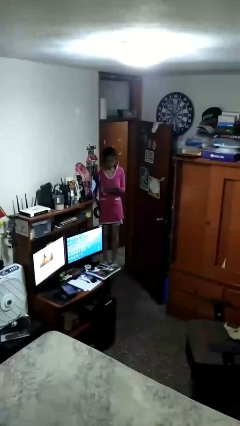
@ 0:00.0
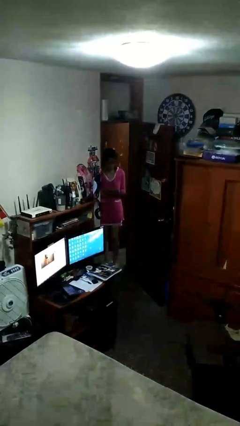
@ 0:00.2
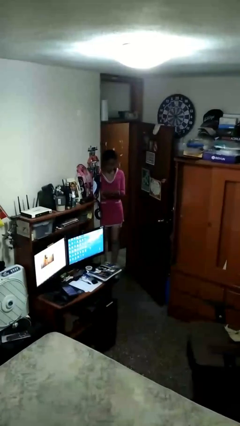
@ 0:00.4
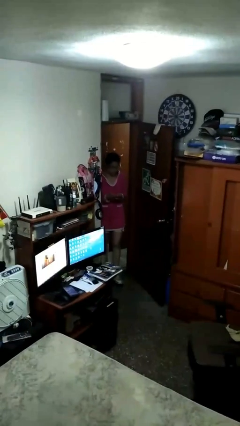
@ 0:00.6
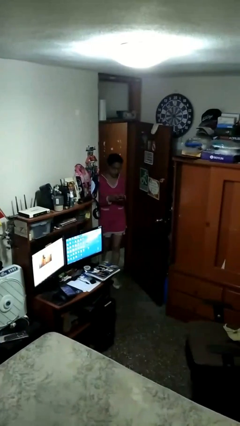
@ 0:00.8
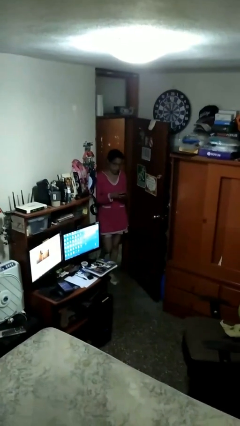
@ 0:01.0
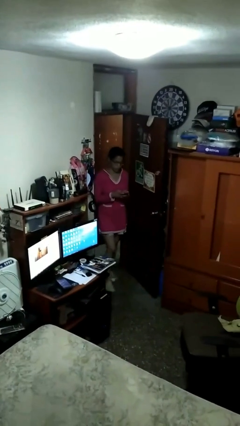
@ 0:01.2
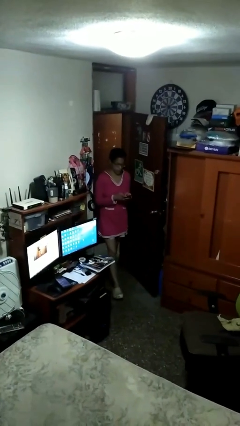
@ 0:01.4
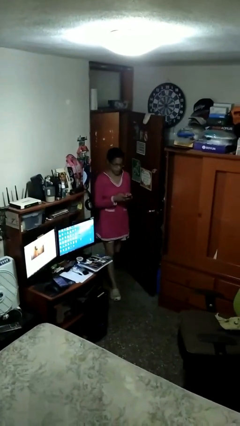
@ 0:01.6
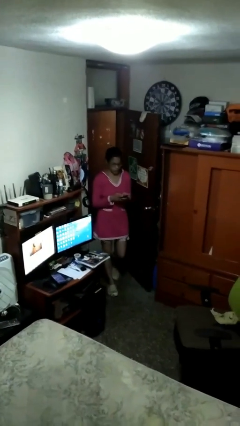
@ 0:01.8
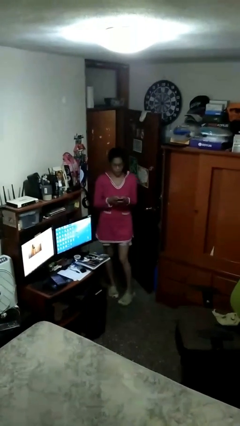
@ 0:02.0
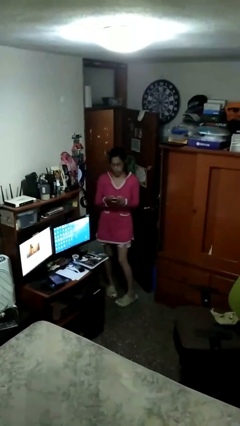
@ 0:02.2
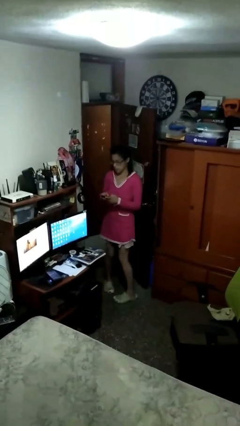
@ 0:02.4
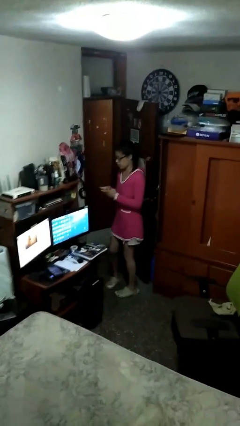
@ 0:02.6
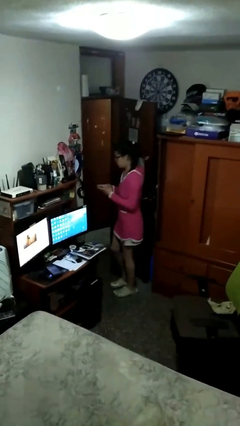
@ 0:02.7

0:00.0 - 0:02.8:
person enters scene through structure

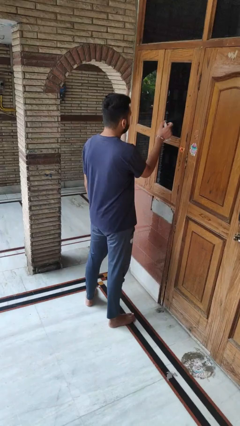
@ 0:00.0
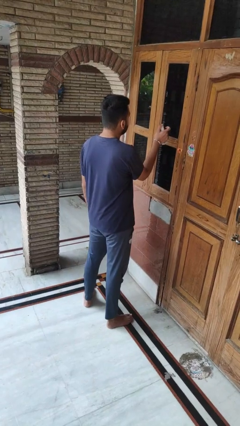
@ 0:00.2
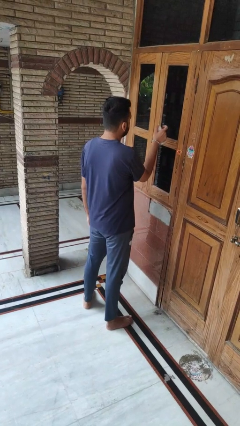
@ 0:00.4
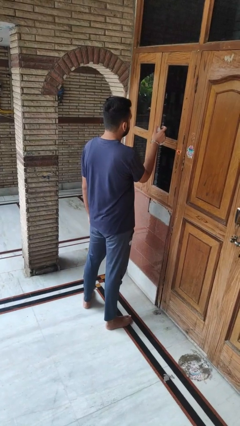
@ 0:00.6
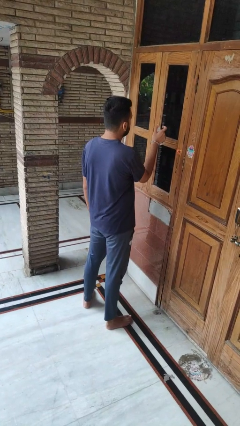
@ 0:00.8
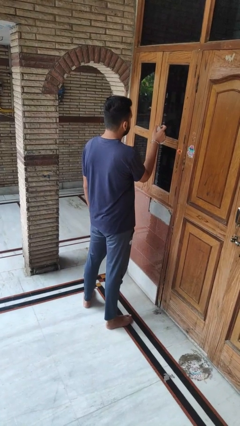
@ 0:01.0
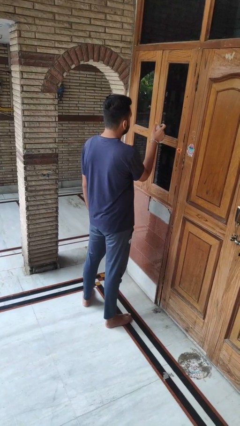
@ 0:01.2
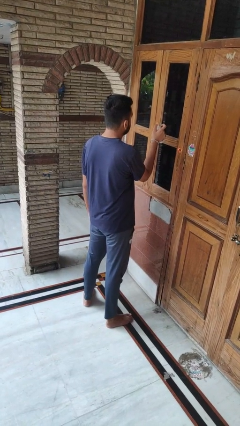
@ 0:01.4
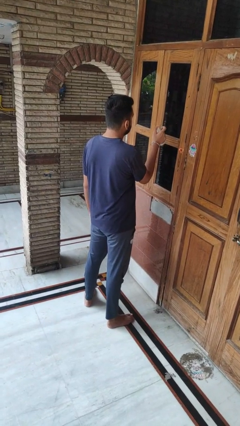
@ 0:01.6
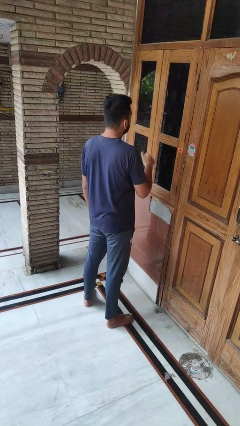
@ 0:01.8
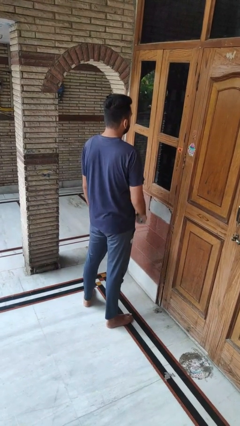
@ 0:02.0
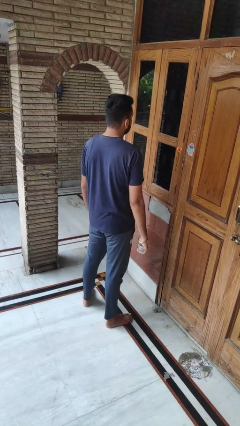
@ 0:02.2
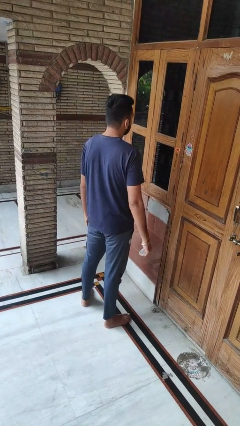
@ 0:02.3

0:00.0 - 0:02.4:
person sprays from bottle

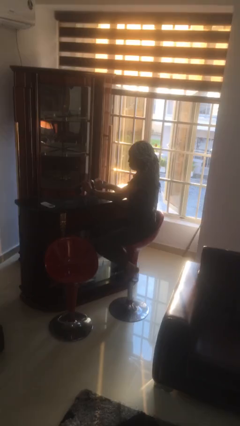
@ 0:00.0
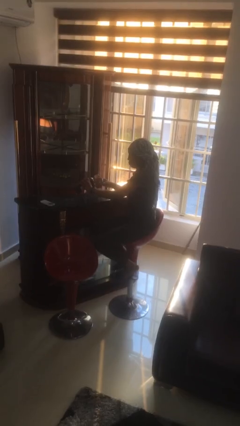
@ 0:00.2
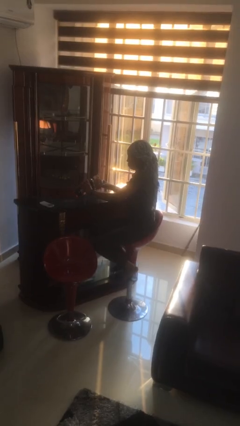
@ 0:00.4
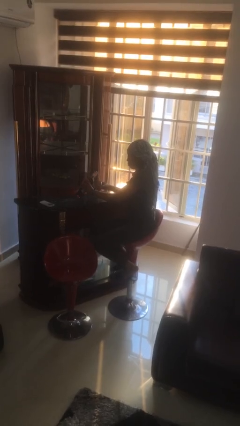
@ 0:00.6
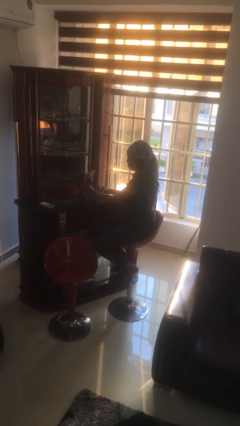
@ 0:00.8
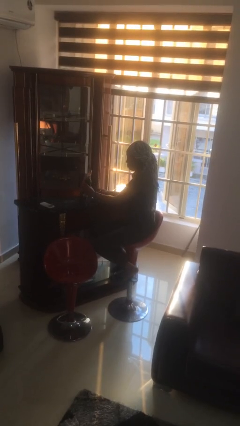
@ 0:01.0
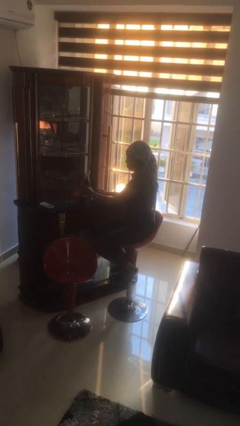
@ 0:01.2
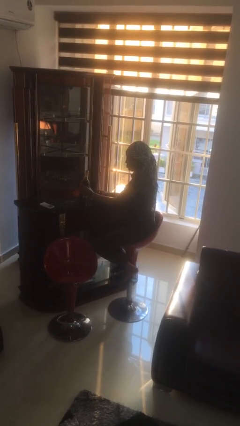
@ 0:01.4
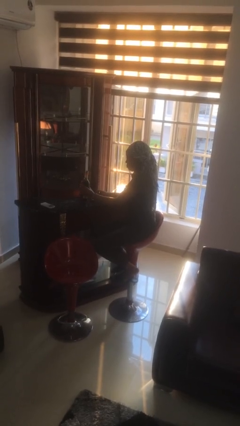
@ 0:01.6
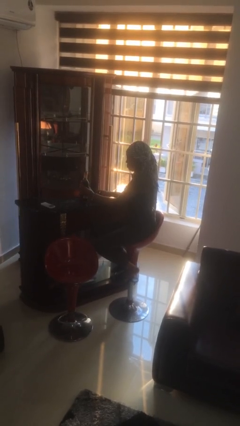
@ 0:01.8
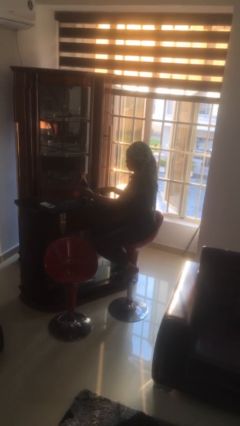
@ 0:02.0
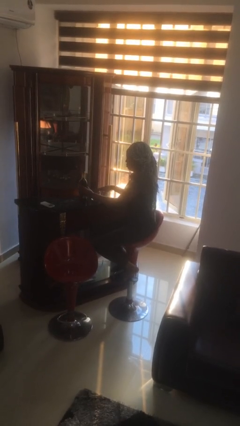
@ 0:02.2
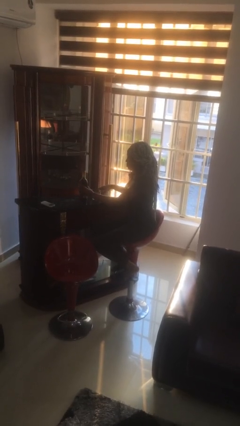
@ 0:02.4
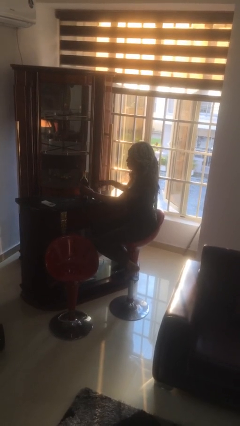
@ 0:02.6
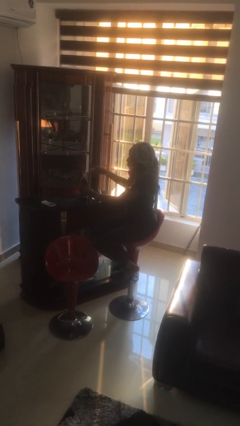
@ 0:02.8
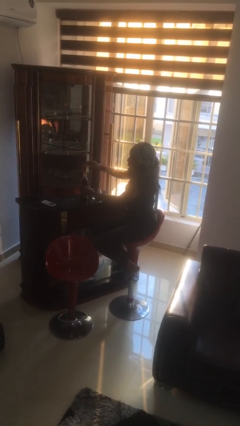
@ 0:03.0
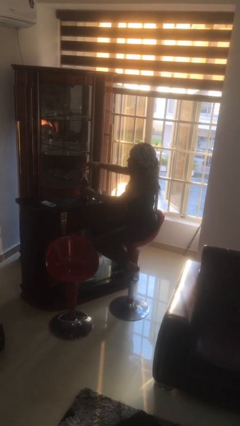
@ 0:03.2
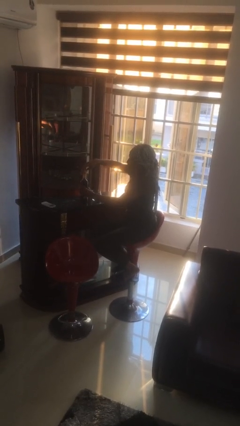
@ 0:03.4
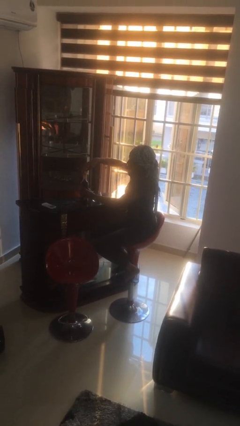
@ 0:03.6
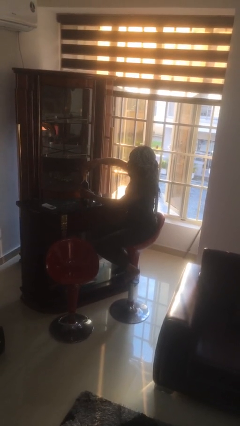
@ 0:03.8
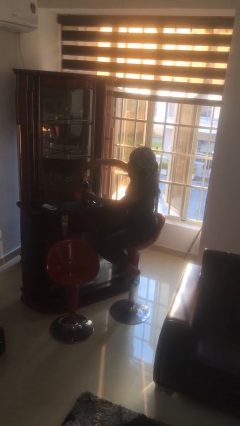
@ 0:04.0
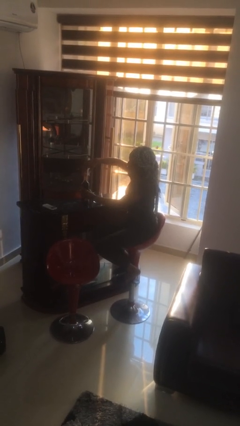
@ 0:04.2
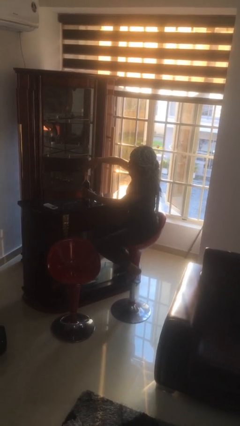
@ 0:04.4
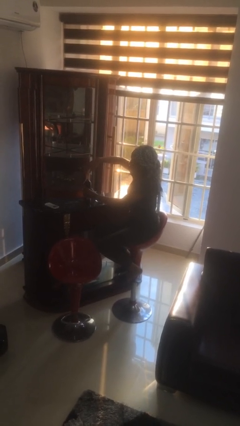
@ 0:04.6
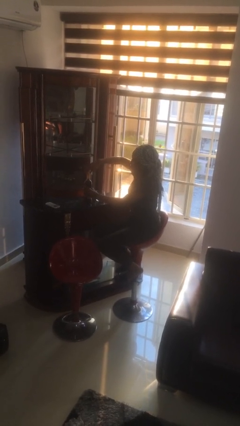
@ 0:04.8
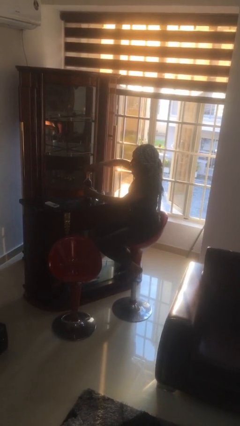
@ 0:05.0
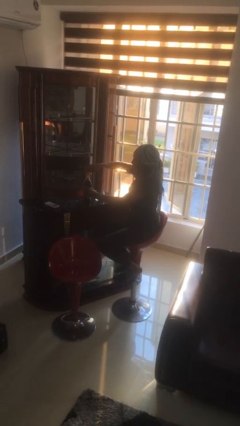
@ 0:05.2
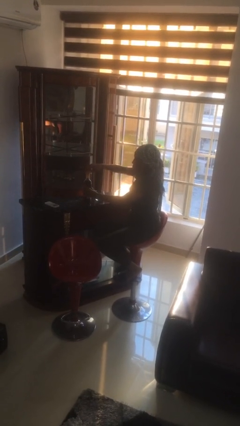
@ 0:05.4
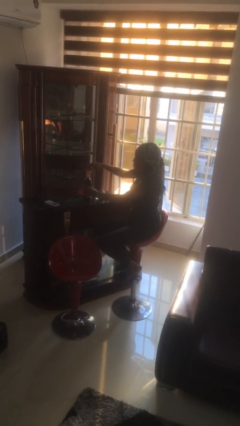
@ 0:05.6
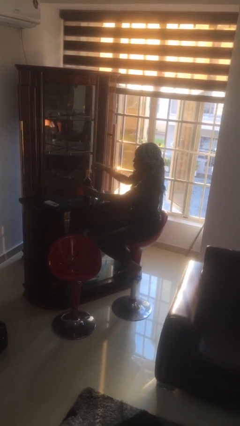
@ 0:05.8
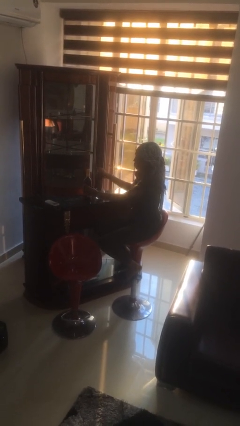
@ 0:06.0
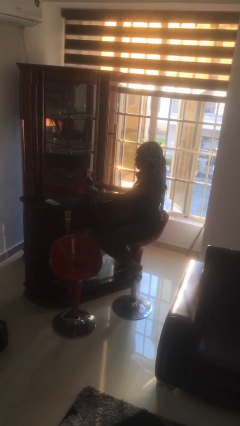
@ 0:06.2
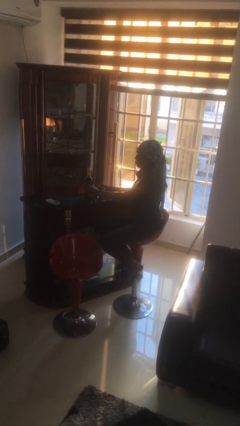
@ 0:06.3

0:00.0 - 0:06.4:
person screws lid to bottle

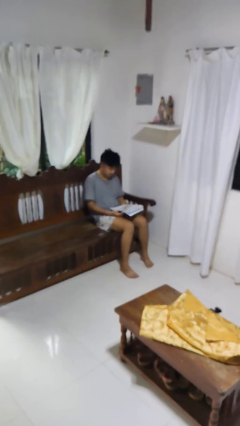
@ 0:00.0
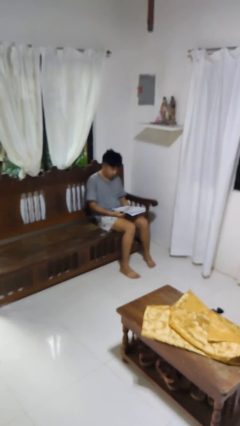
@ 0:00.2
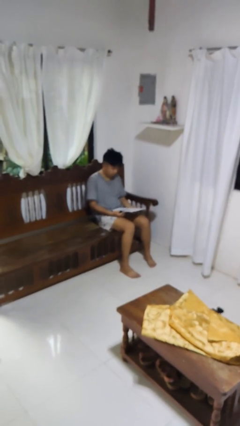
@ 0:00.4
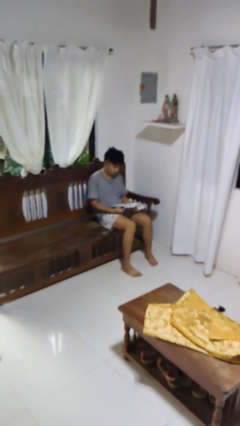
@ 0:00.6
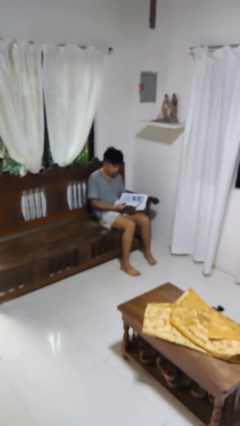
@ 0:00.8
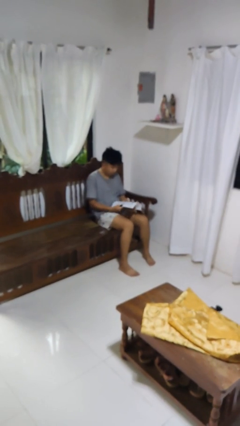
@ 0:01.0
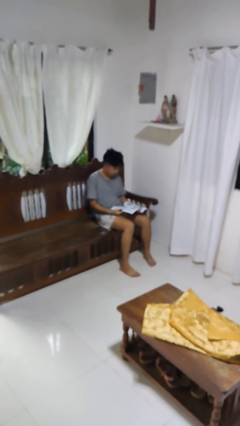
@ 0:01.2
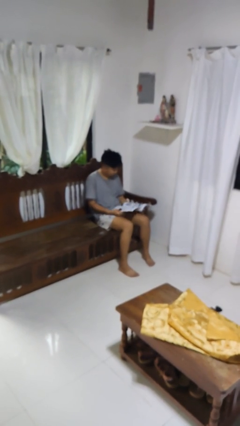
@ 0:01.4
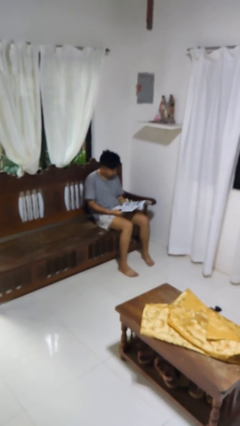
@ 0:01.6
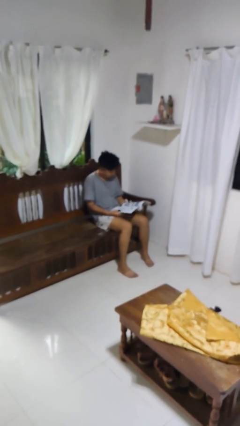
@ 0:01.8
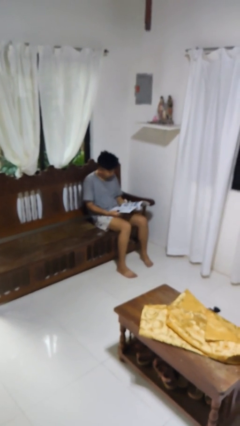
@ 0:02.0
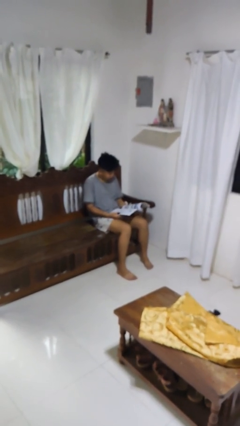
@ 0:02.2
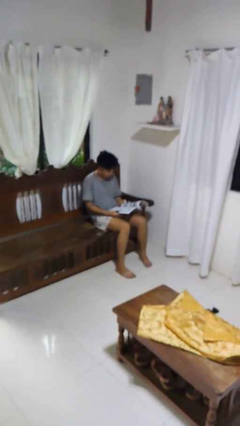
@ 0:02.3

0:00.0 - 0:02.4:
person reads newspaper

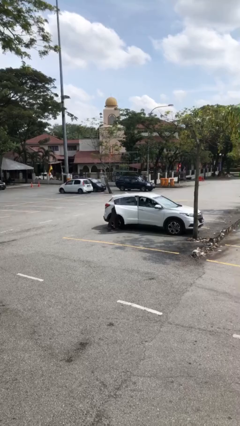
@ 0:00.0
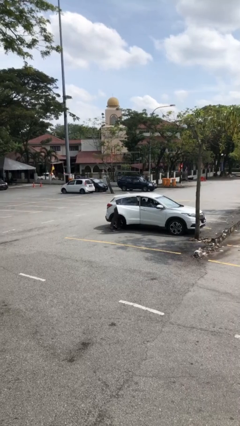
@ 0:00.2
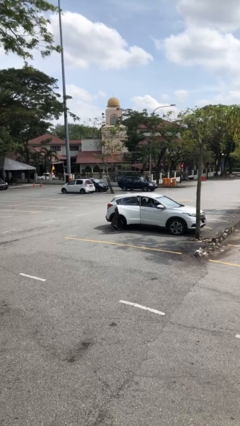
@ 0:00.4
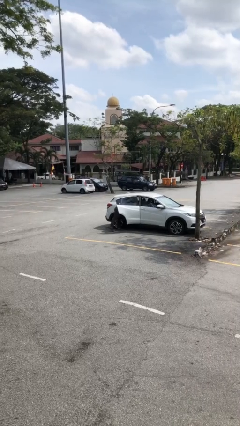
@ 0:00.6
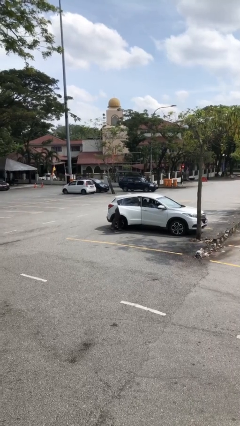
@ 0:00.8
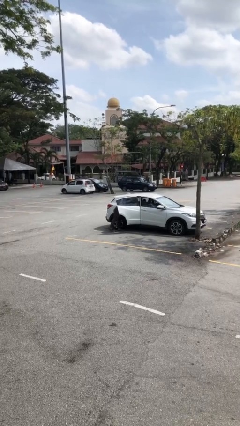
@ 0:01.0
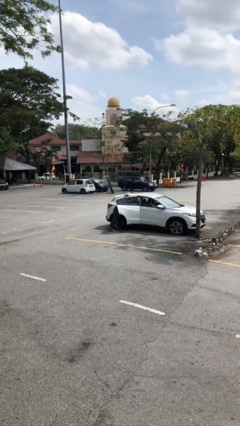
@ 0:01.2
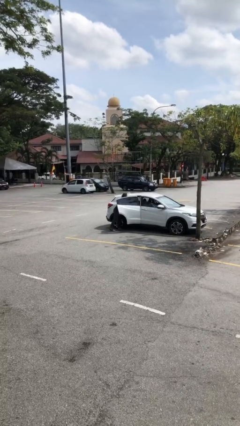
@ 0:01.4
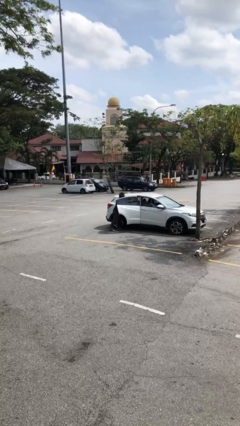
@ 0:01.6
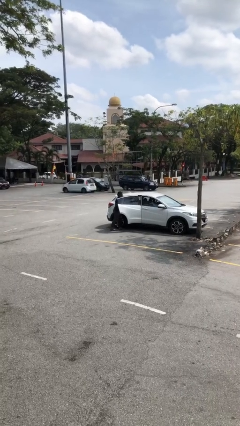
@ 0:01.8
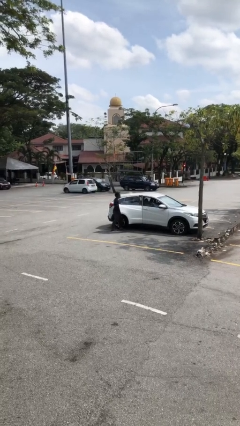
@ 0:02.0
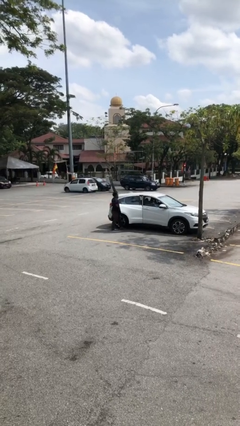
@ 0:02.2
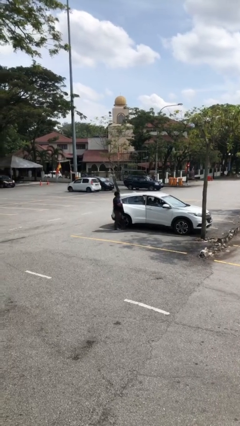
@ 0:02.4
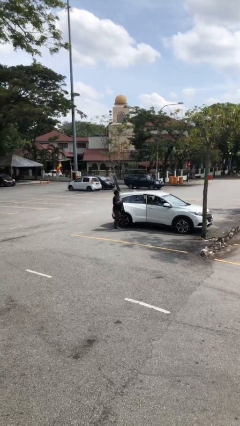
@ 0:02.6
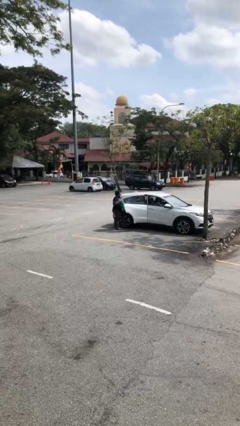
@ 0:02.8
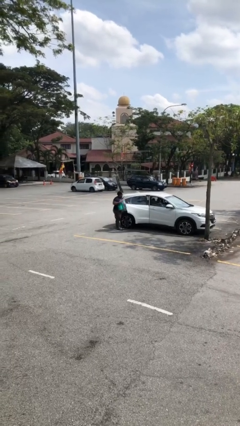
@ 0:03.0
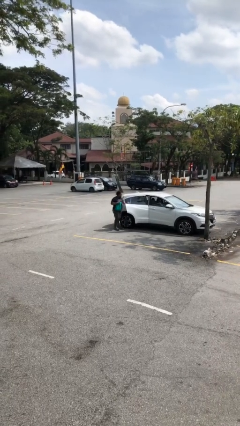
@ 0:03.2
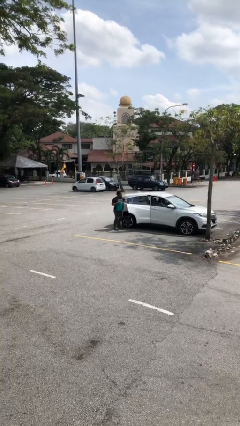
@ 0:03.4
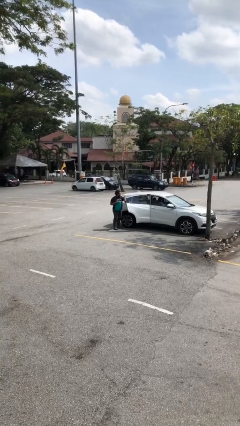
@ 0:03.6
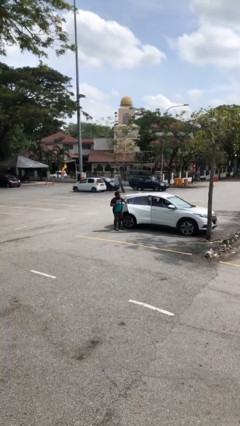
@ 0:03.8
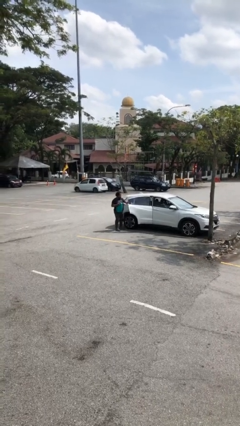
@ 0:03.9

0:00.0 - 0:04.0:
person unloads car
